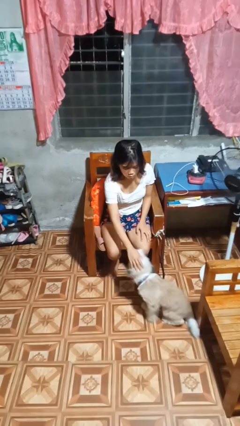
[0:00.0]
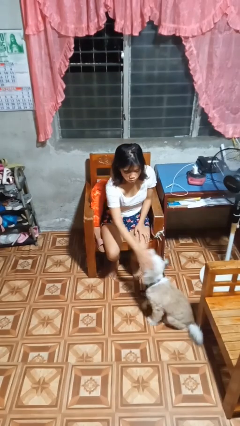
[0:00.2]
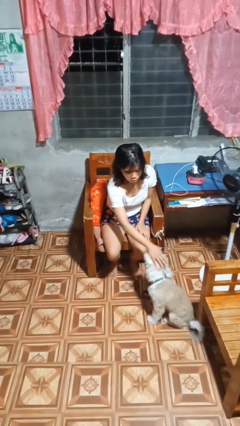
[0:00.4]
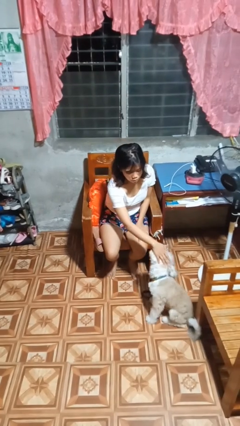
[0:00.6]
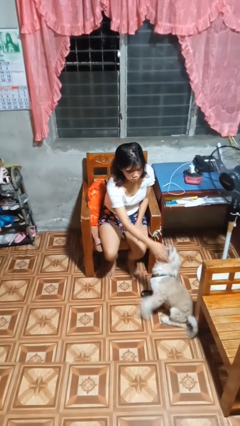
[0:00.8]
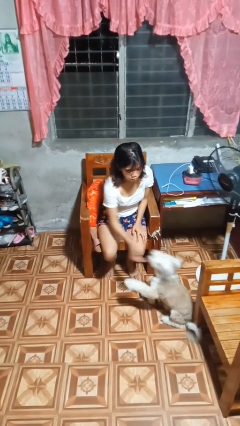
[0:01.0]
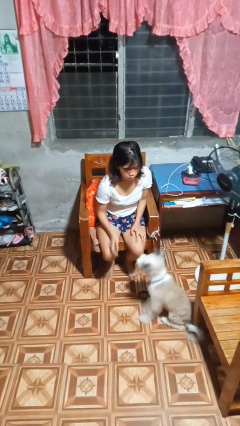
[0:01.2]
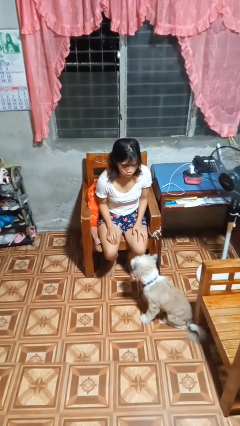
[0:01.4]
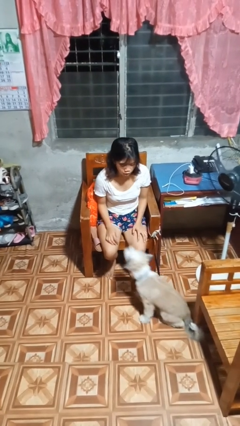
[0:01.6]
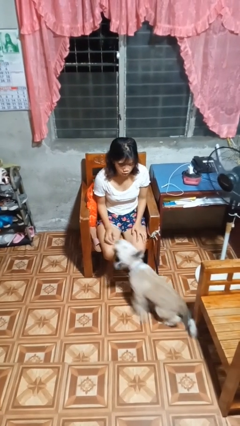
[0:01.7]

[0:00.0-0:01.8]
person pets dog

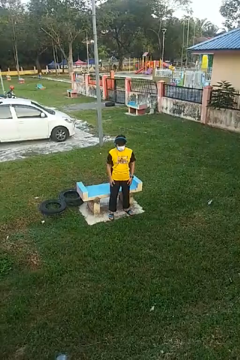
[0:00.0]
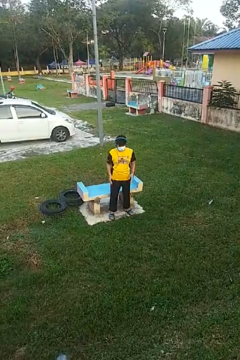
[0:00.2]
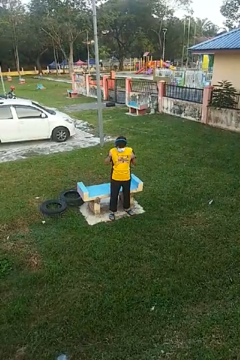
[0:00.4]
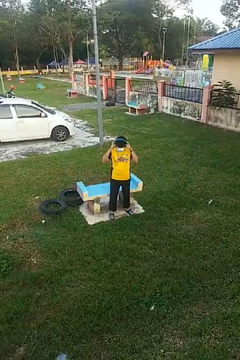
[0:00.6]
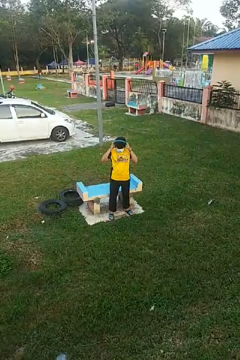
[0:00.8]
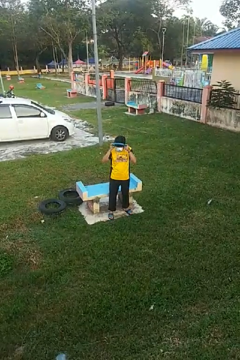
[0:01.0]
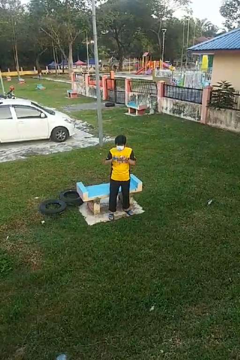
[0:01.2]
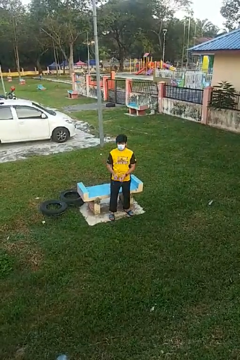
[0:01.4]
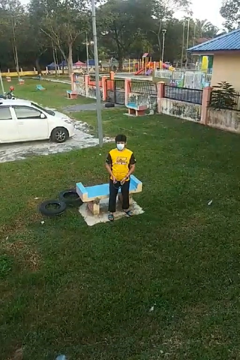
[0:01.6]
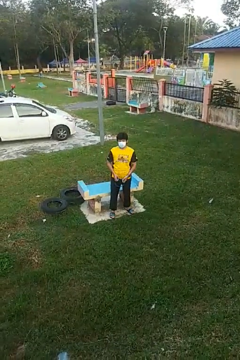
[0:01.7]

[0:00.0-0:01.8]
person takes off headphones

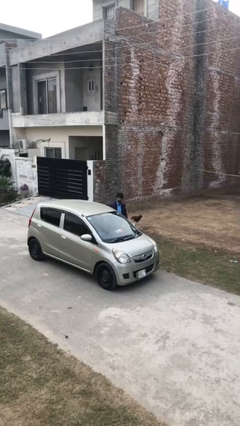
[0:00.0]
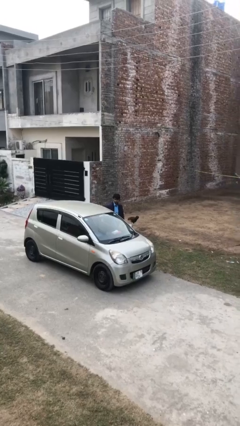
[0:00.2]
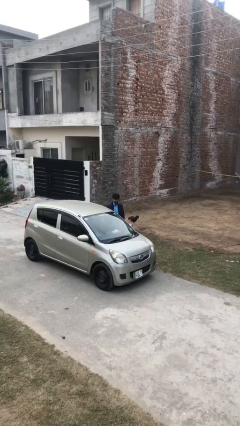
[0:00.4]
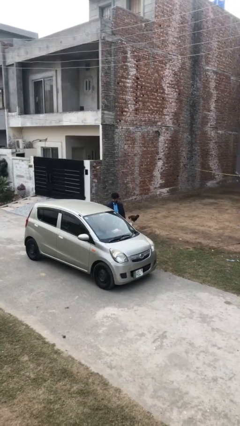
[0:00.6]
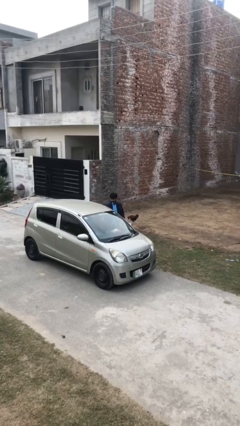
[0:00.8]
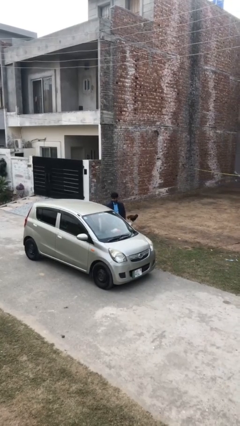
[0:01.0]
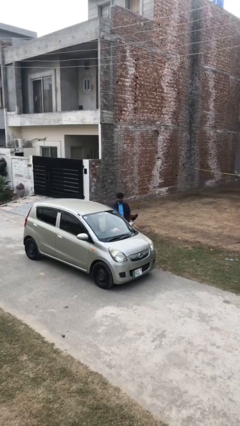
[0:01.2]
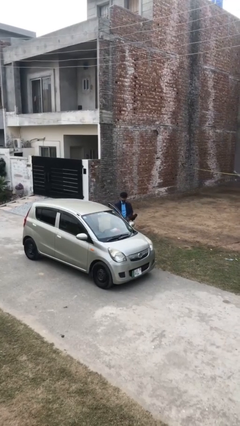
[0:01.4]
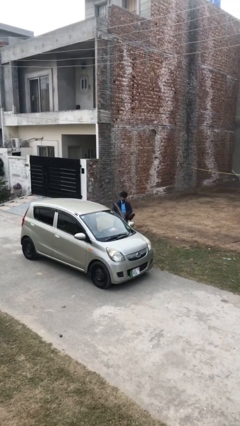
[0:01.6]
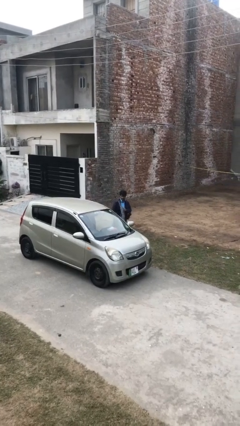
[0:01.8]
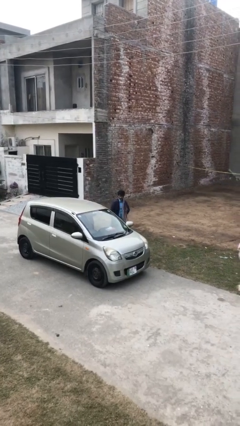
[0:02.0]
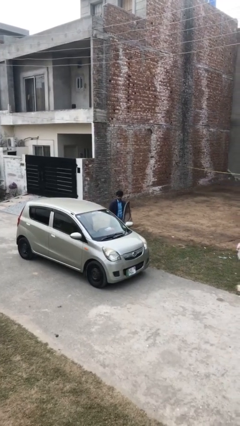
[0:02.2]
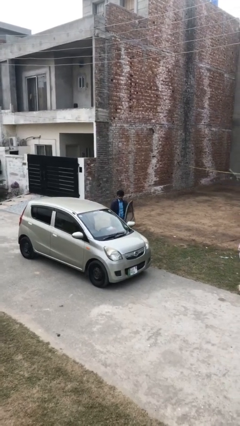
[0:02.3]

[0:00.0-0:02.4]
person opens car door

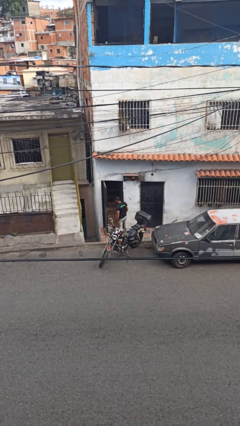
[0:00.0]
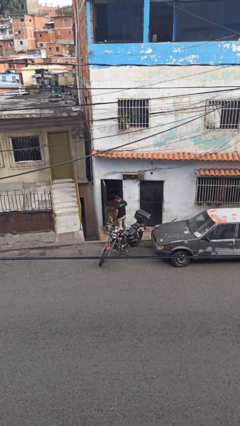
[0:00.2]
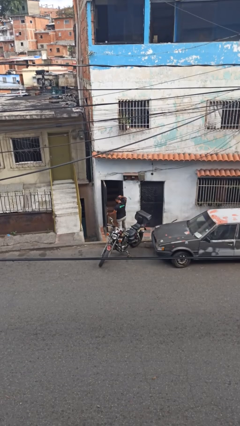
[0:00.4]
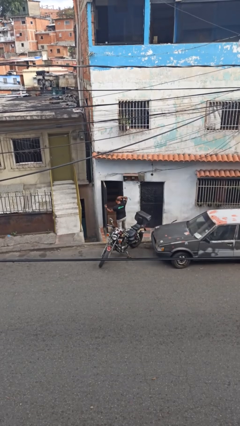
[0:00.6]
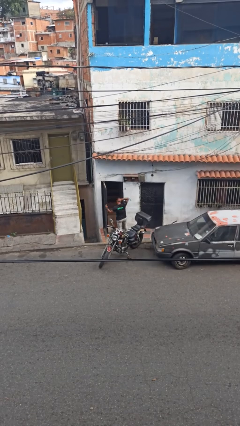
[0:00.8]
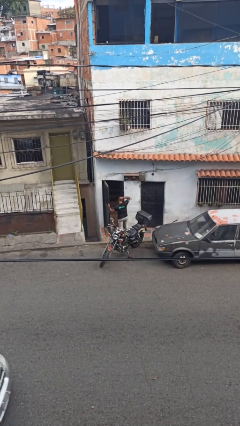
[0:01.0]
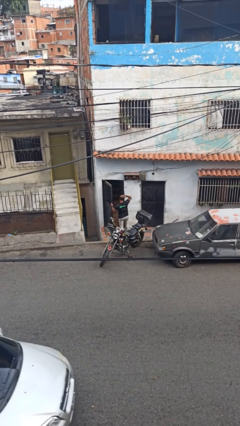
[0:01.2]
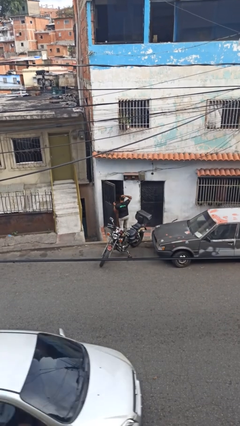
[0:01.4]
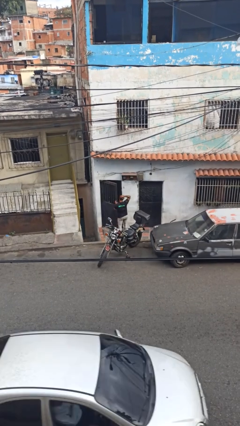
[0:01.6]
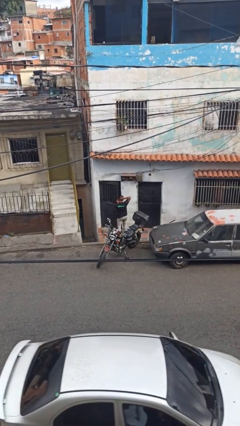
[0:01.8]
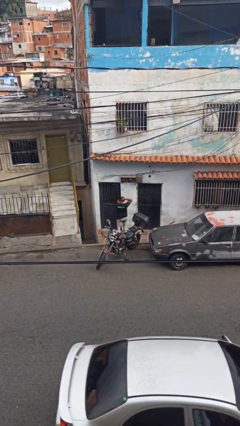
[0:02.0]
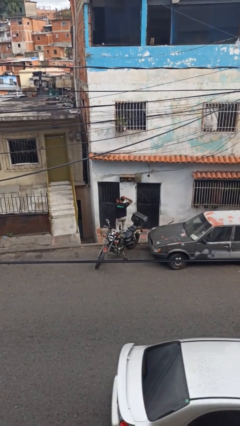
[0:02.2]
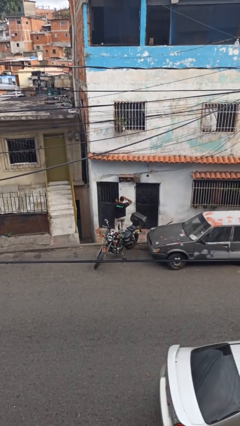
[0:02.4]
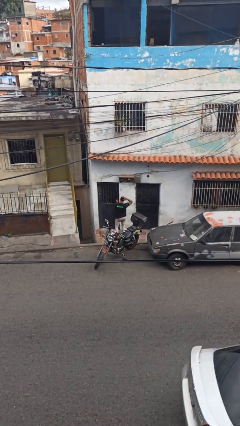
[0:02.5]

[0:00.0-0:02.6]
person closes facility door

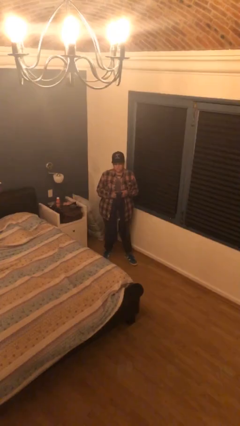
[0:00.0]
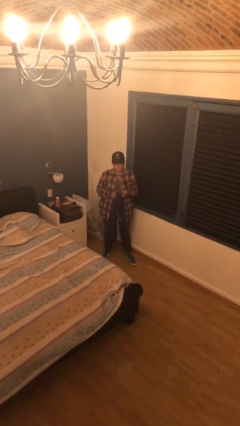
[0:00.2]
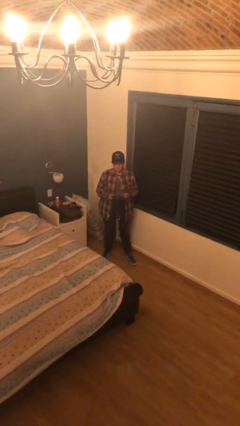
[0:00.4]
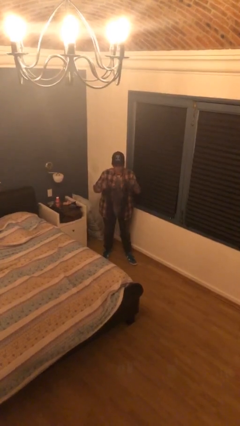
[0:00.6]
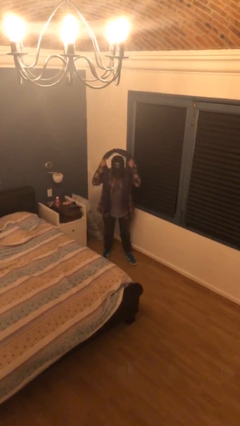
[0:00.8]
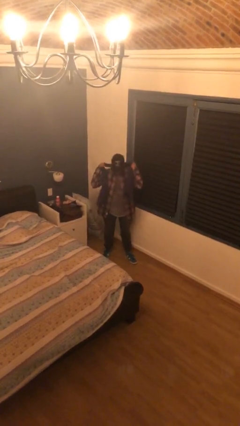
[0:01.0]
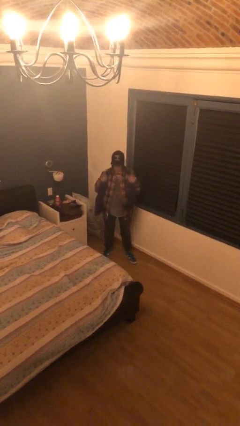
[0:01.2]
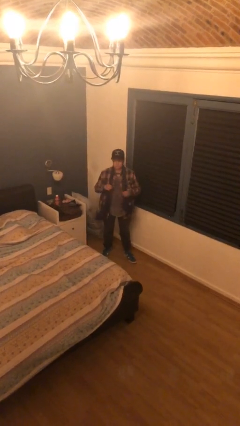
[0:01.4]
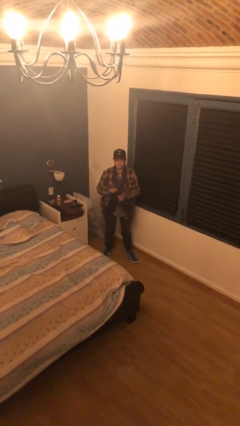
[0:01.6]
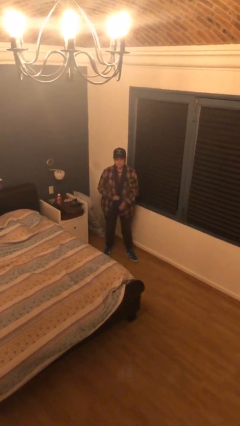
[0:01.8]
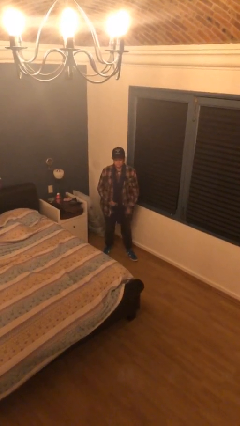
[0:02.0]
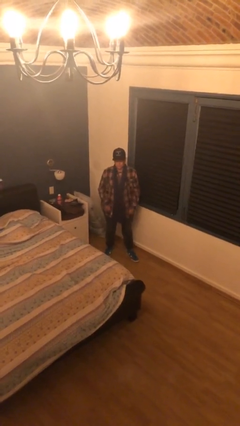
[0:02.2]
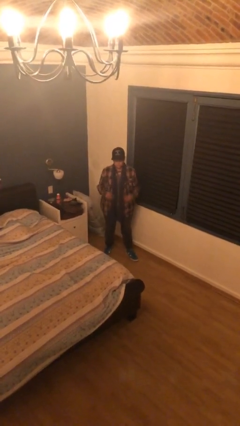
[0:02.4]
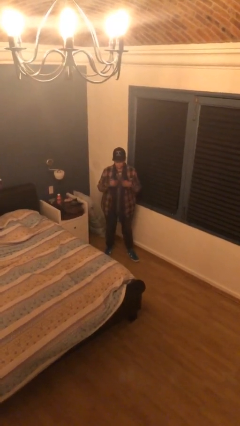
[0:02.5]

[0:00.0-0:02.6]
person puts on scarf

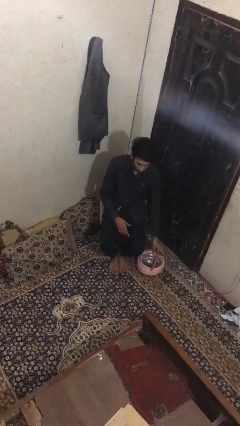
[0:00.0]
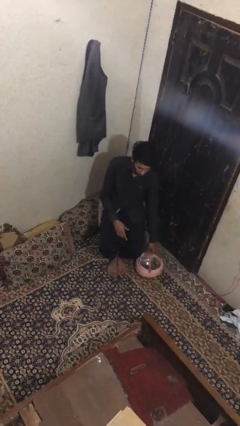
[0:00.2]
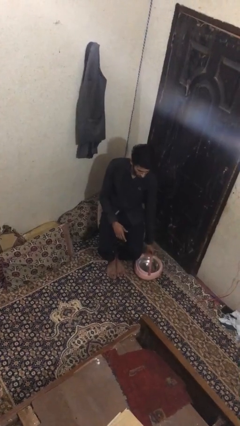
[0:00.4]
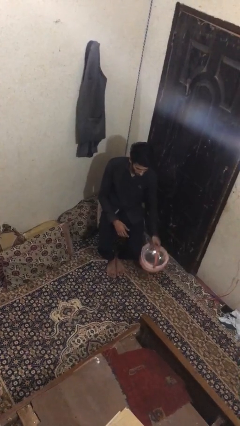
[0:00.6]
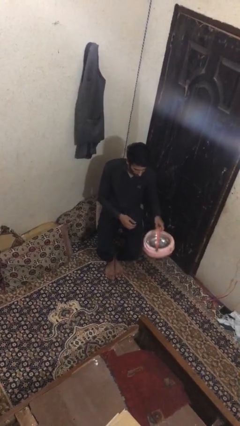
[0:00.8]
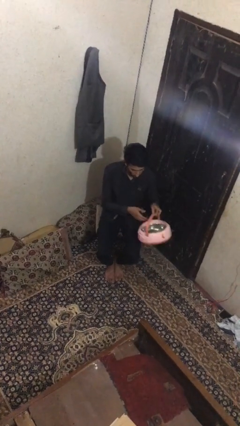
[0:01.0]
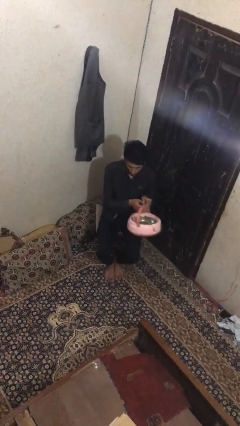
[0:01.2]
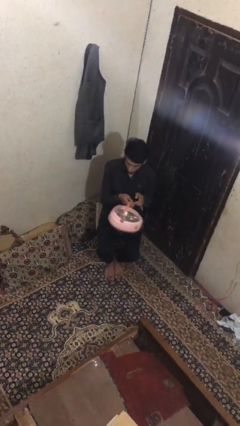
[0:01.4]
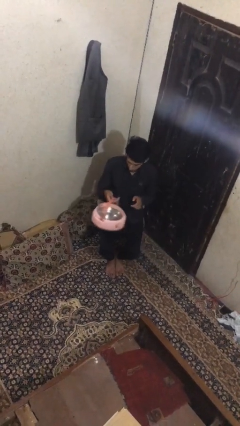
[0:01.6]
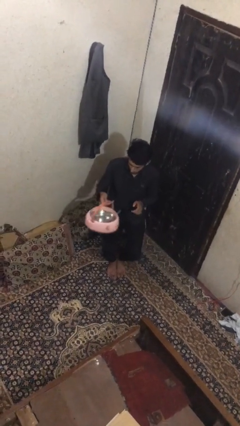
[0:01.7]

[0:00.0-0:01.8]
person picks up object from floor

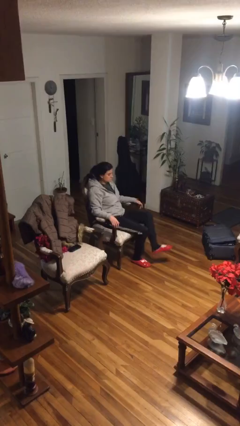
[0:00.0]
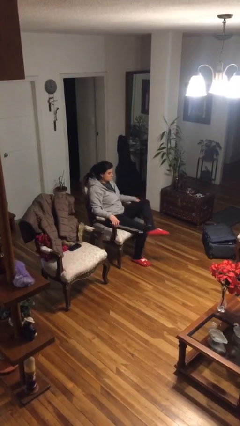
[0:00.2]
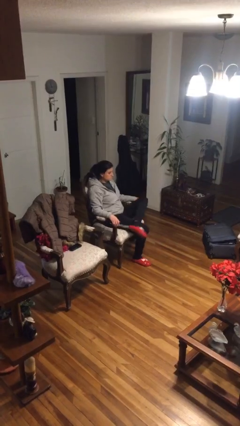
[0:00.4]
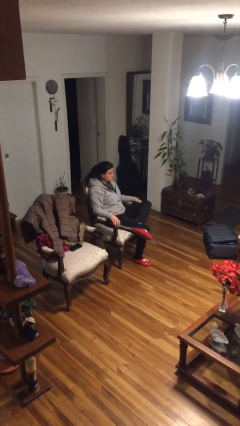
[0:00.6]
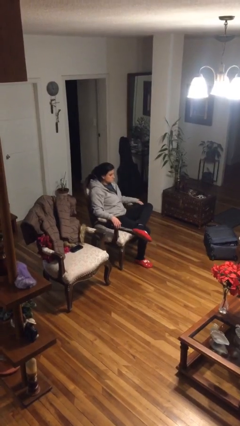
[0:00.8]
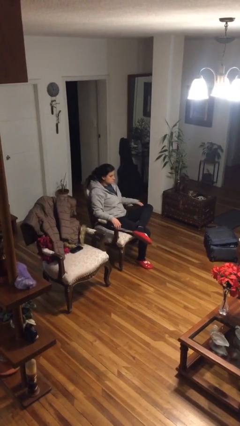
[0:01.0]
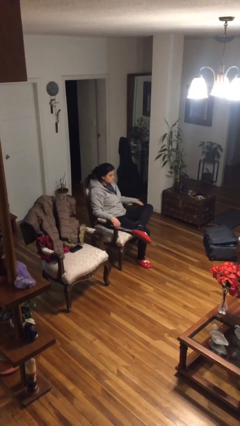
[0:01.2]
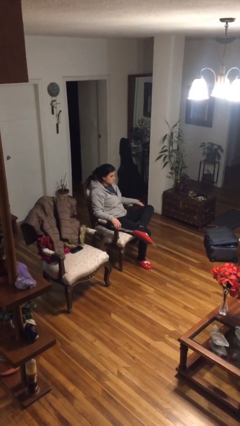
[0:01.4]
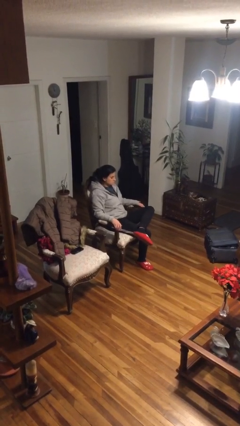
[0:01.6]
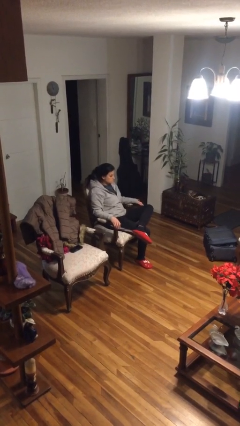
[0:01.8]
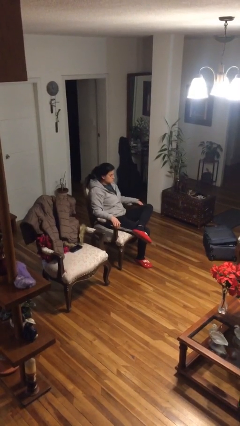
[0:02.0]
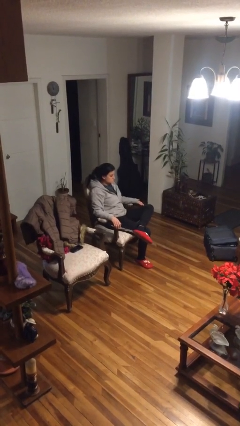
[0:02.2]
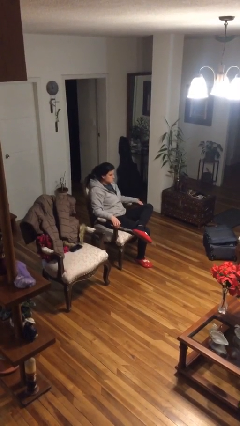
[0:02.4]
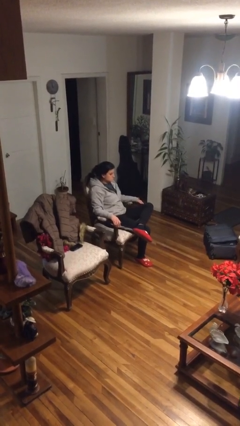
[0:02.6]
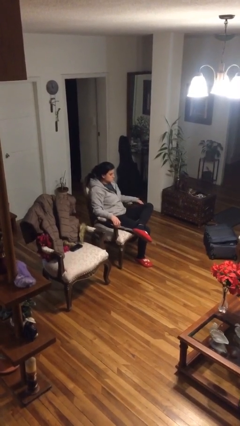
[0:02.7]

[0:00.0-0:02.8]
person crosses legs

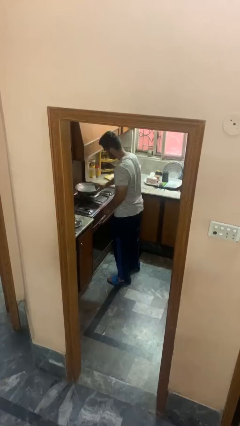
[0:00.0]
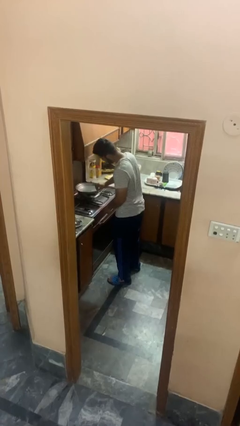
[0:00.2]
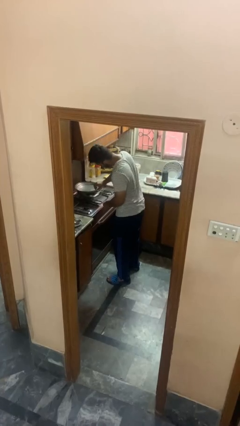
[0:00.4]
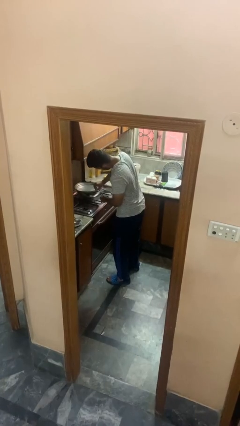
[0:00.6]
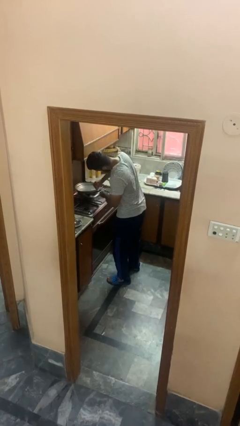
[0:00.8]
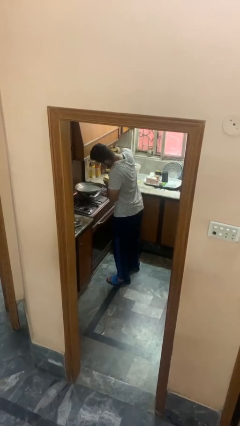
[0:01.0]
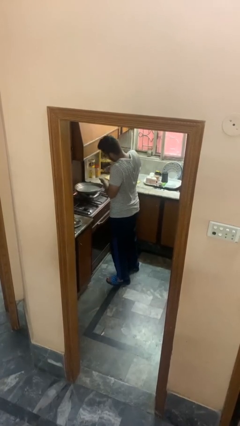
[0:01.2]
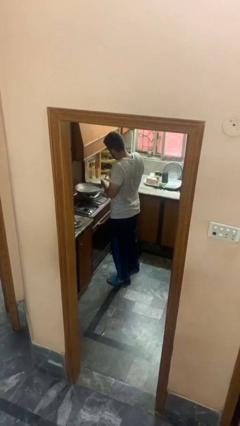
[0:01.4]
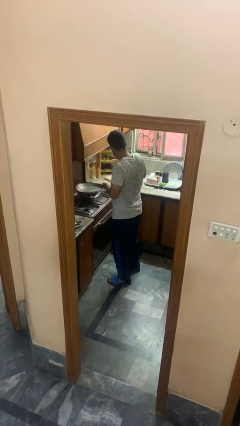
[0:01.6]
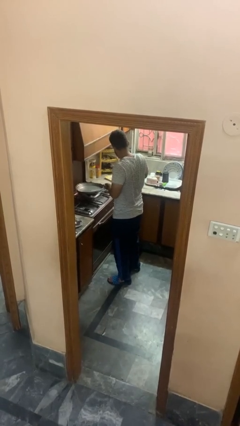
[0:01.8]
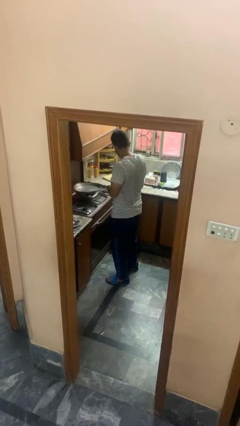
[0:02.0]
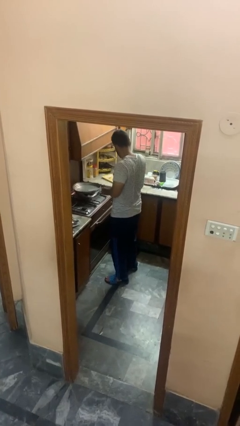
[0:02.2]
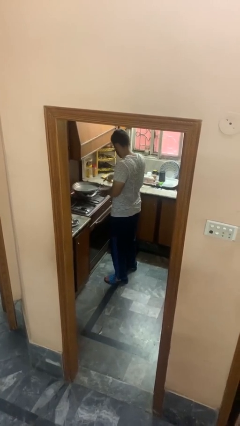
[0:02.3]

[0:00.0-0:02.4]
person burns hand
